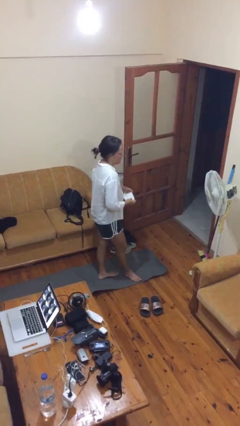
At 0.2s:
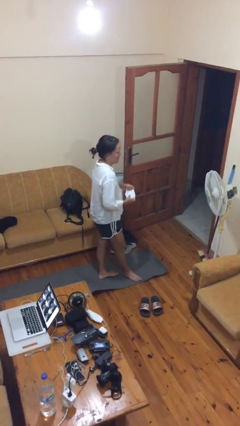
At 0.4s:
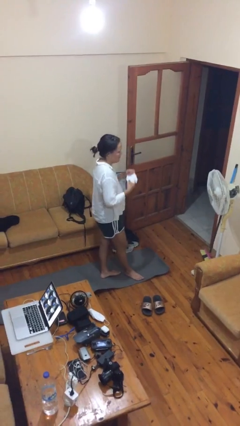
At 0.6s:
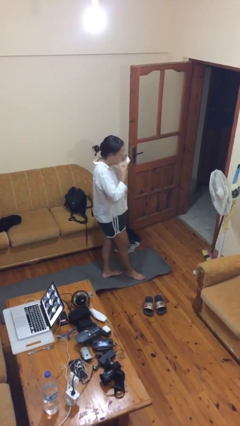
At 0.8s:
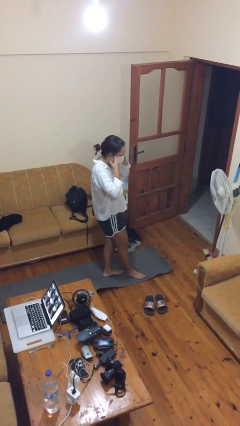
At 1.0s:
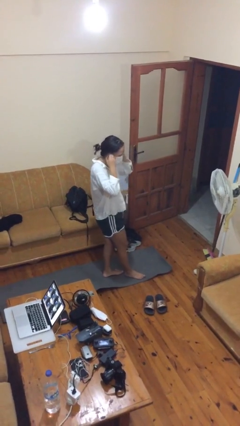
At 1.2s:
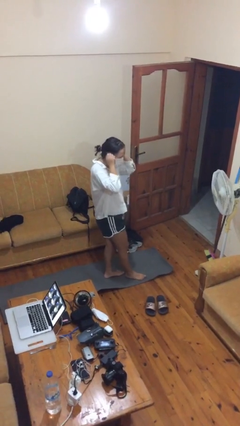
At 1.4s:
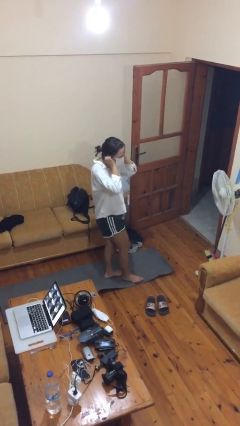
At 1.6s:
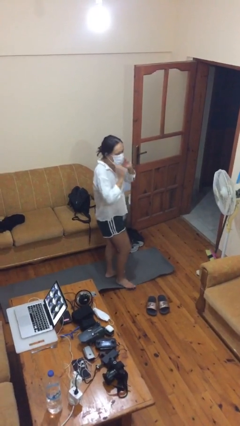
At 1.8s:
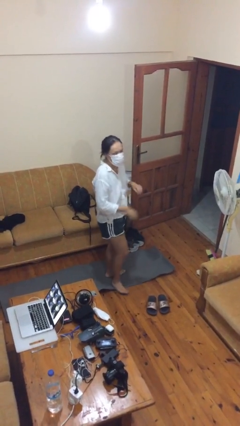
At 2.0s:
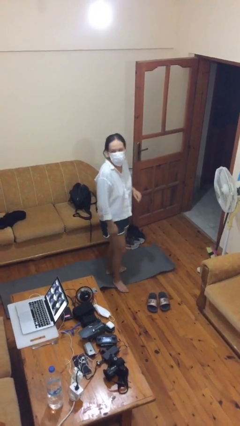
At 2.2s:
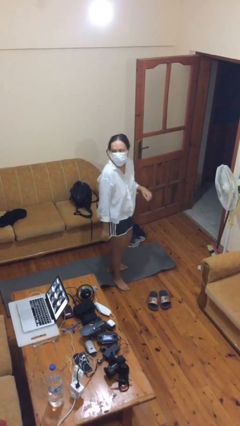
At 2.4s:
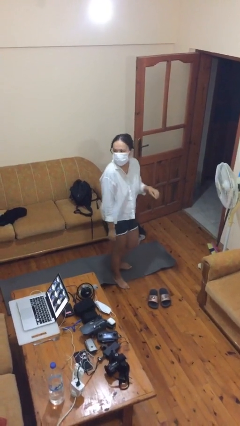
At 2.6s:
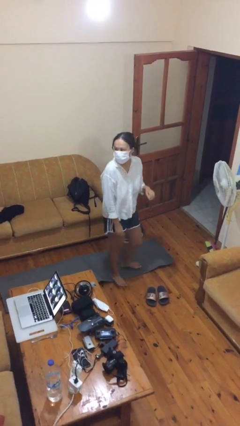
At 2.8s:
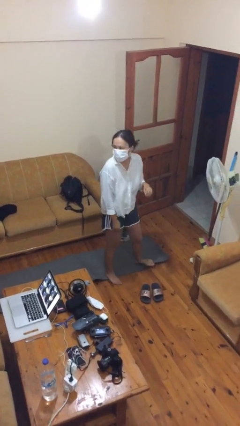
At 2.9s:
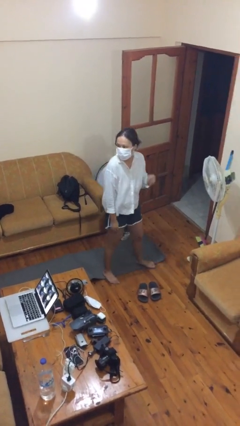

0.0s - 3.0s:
person puts on facemask

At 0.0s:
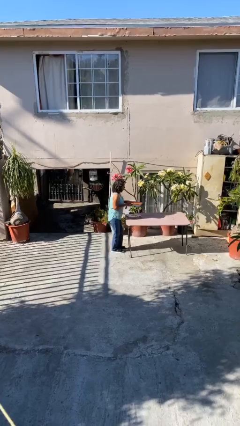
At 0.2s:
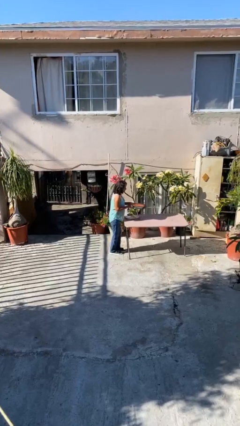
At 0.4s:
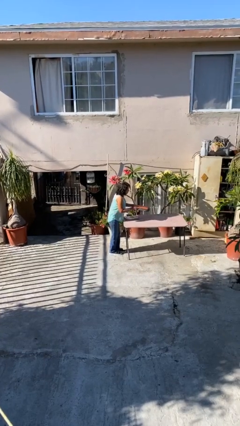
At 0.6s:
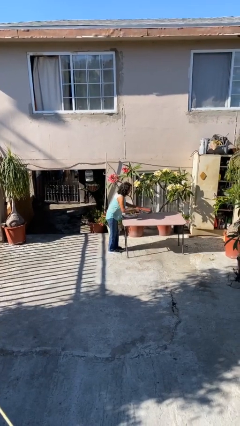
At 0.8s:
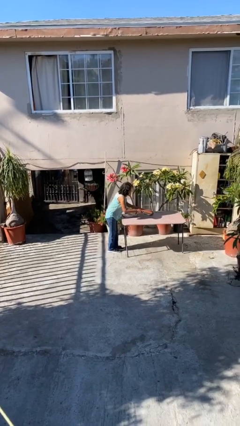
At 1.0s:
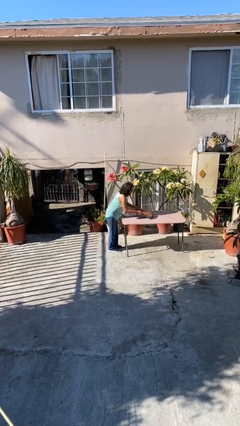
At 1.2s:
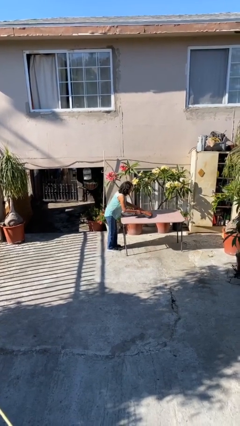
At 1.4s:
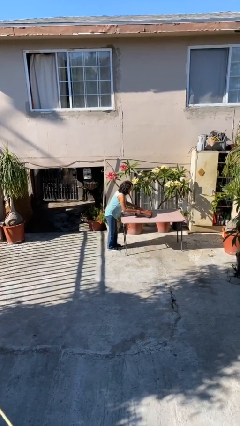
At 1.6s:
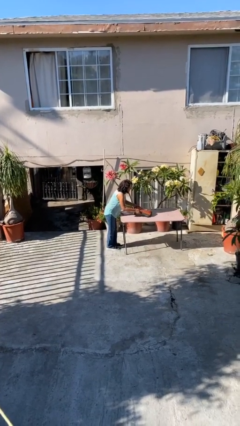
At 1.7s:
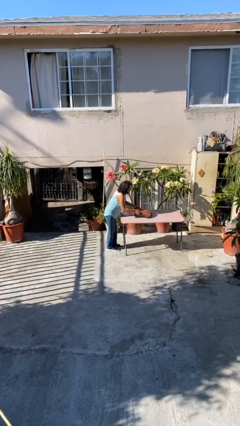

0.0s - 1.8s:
person puts down object on table

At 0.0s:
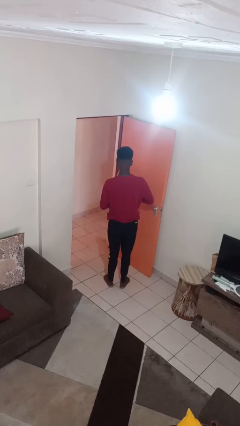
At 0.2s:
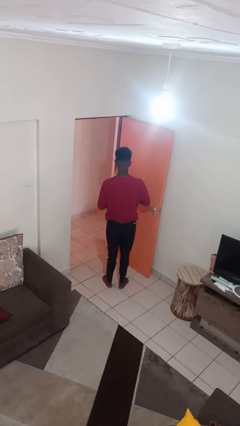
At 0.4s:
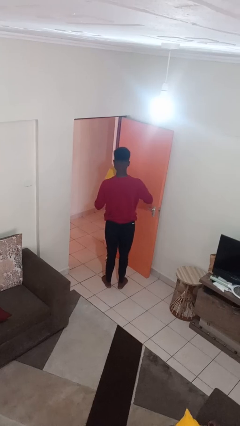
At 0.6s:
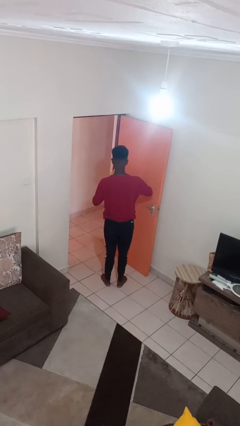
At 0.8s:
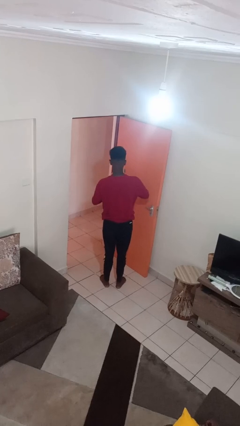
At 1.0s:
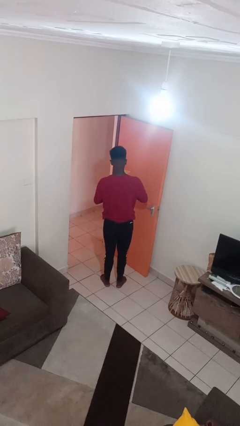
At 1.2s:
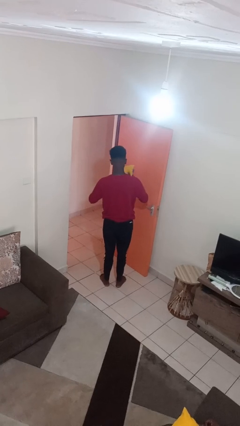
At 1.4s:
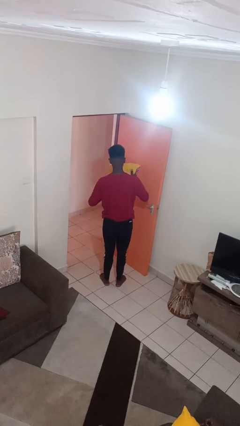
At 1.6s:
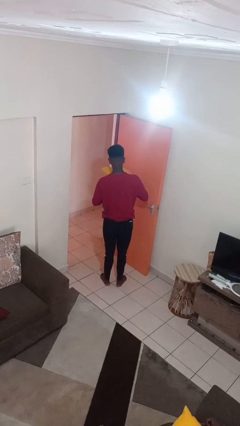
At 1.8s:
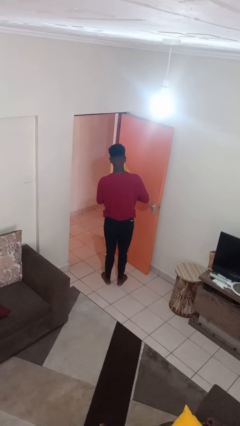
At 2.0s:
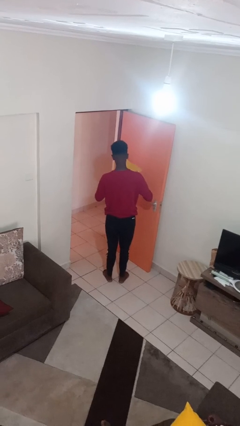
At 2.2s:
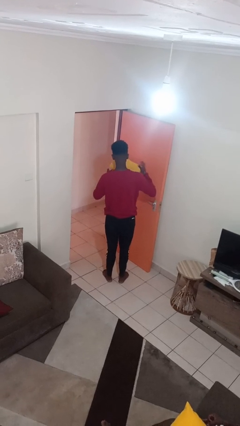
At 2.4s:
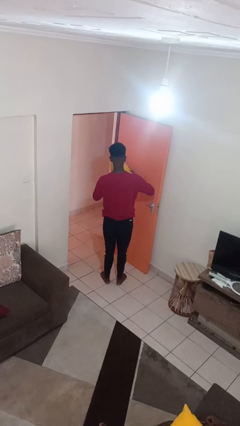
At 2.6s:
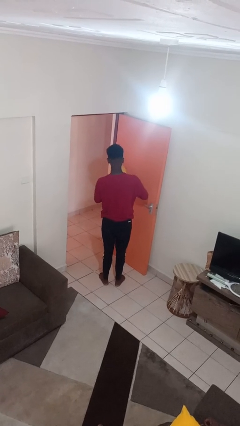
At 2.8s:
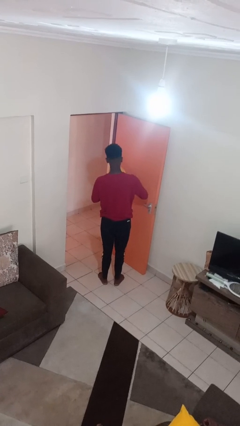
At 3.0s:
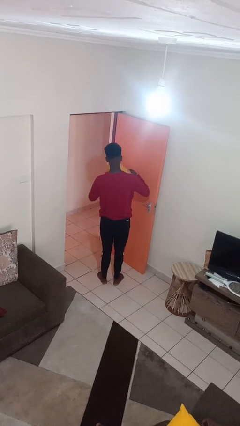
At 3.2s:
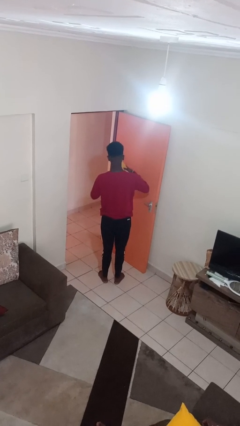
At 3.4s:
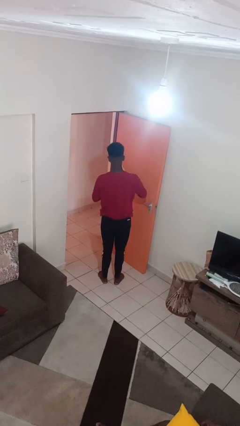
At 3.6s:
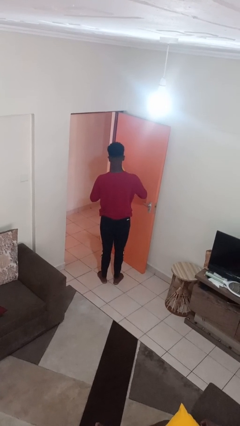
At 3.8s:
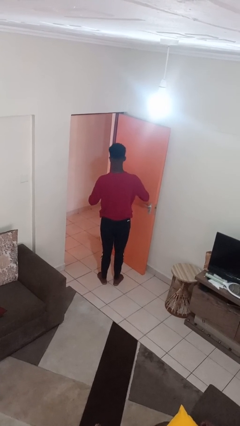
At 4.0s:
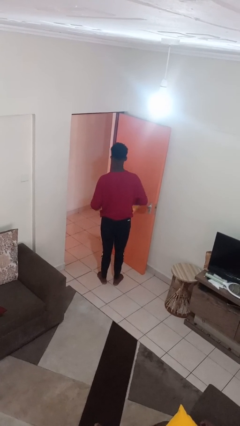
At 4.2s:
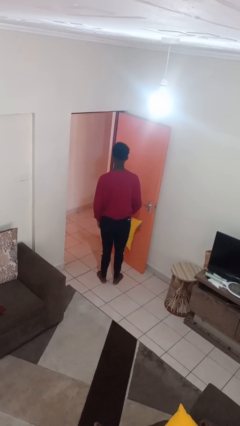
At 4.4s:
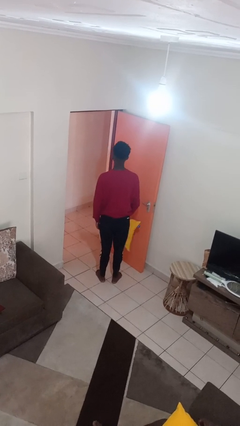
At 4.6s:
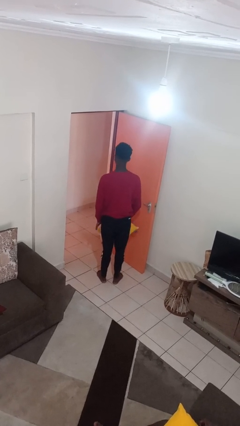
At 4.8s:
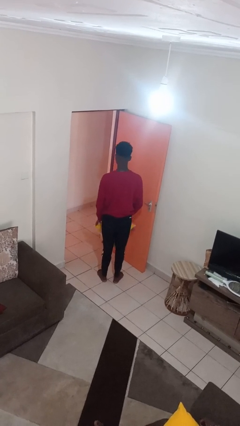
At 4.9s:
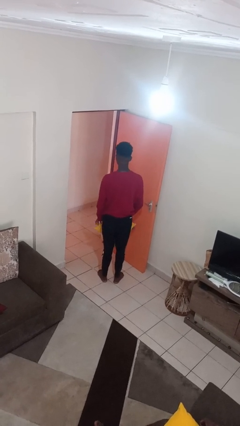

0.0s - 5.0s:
person squeezes object

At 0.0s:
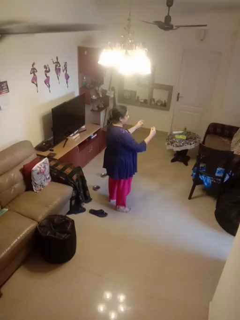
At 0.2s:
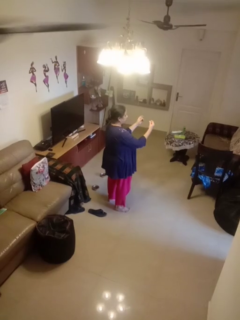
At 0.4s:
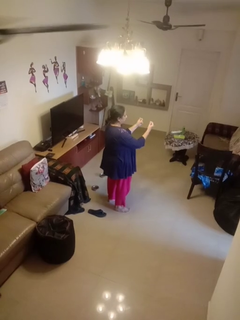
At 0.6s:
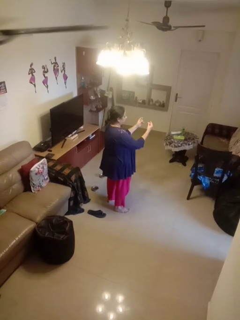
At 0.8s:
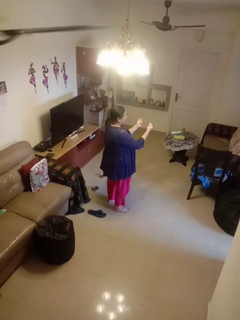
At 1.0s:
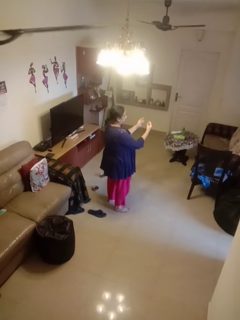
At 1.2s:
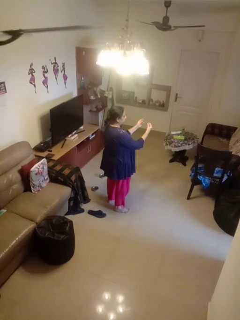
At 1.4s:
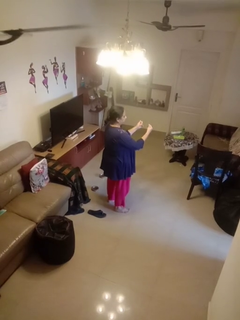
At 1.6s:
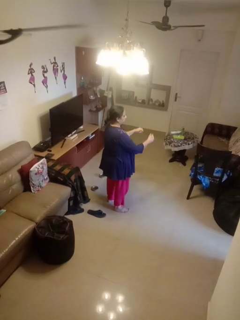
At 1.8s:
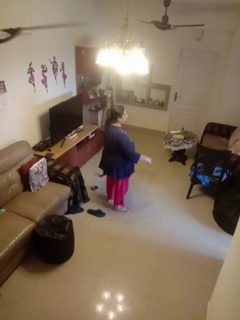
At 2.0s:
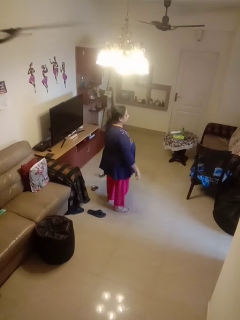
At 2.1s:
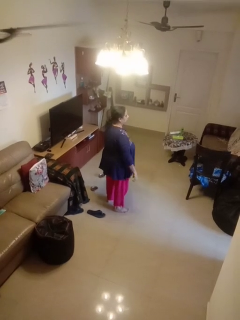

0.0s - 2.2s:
person snaps fingers

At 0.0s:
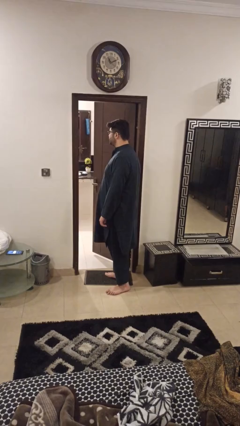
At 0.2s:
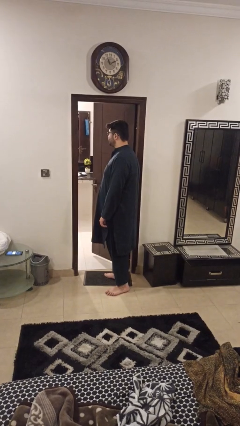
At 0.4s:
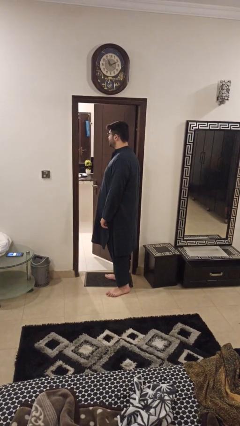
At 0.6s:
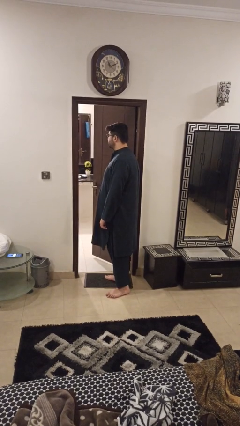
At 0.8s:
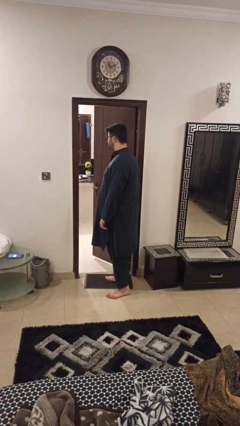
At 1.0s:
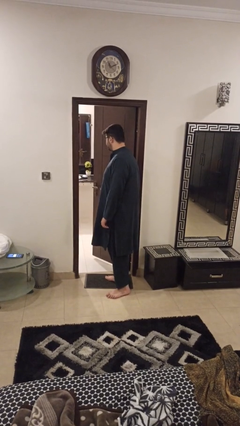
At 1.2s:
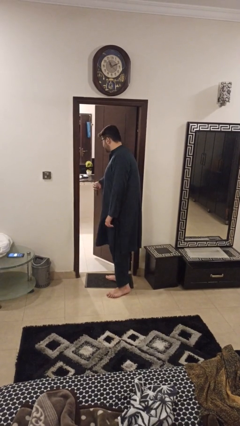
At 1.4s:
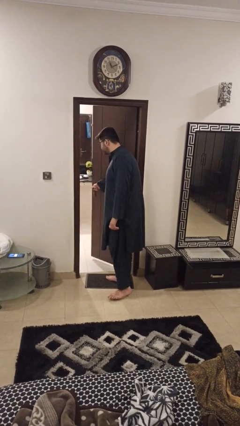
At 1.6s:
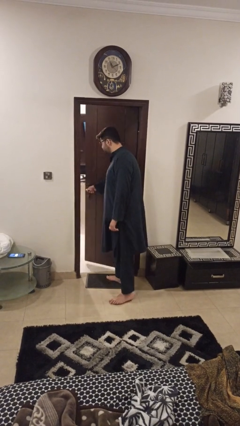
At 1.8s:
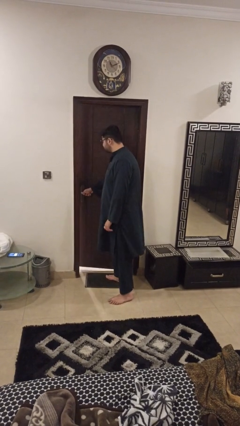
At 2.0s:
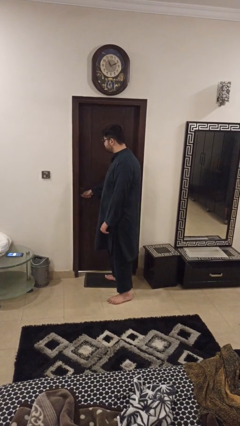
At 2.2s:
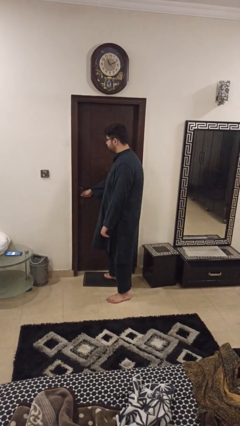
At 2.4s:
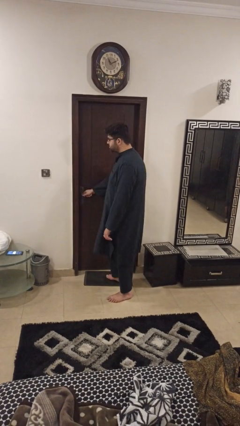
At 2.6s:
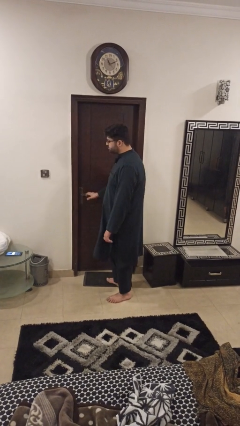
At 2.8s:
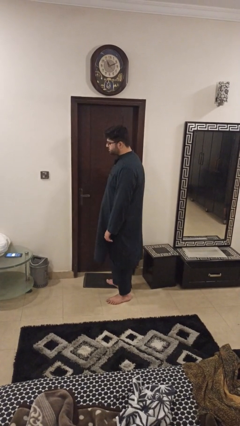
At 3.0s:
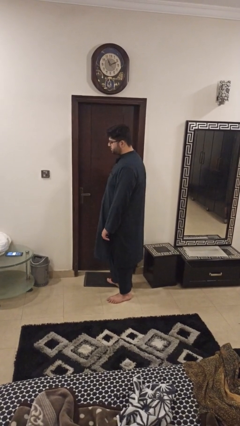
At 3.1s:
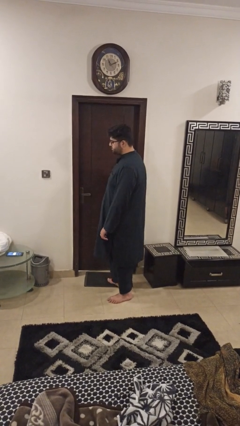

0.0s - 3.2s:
person closes facility door

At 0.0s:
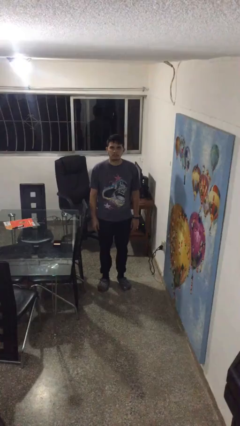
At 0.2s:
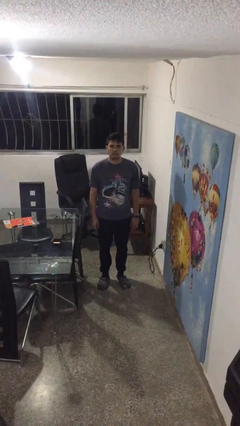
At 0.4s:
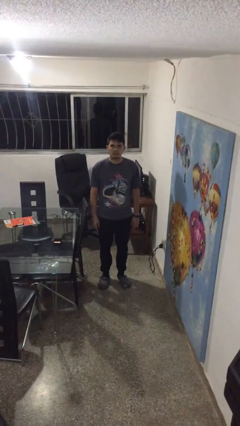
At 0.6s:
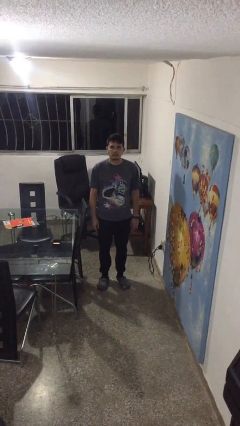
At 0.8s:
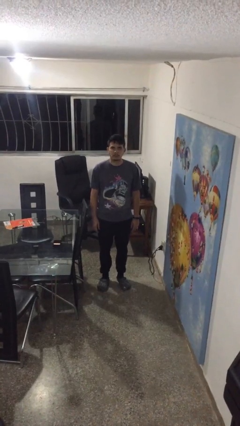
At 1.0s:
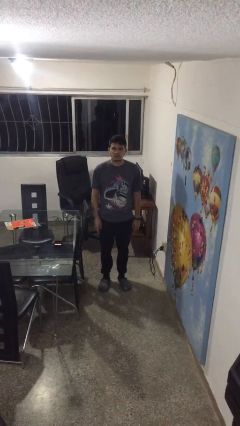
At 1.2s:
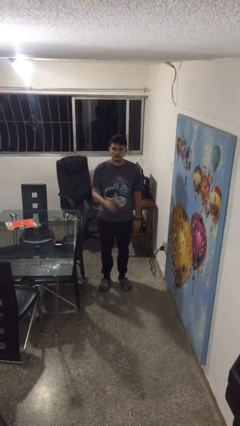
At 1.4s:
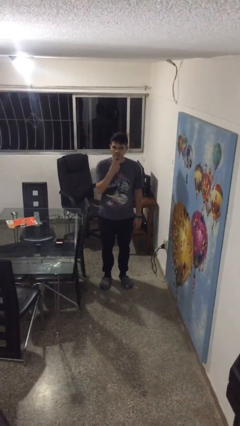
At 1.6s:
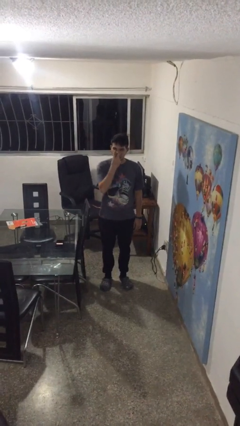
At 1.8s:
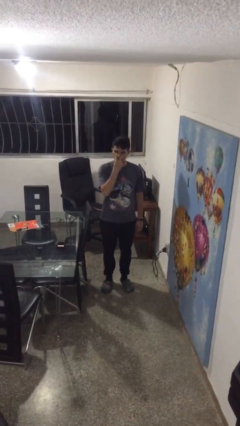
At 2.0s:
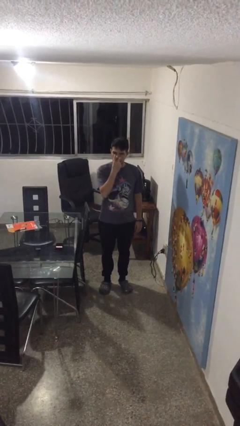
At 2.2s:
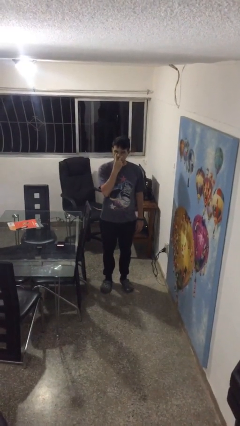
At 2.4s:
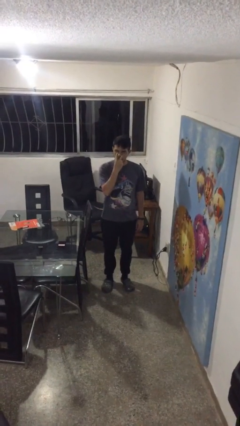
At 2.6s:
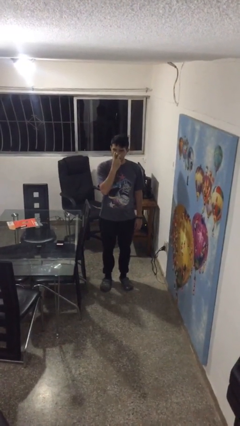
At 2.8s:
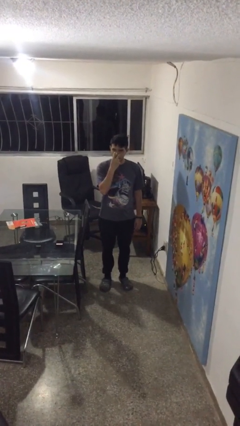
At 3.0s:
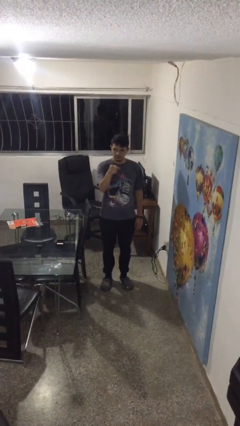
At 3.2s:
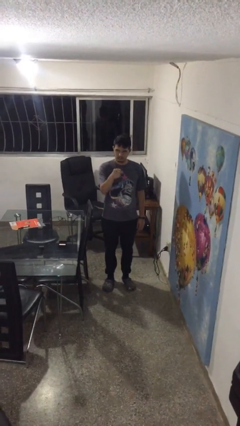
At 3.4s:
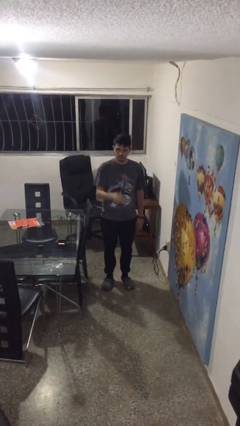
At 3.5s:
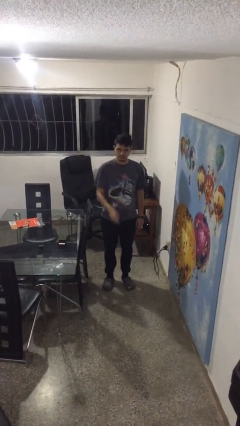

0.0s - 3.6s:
person gestures watch closely
